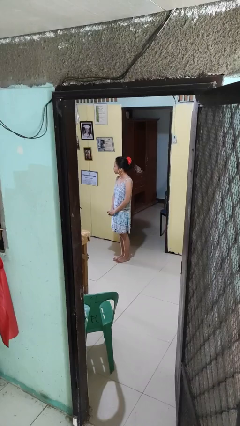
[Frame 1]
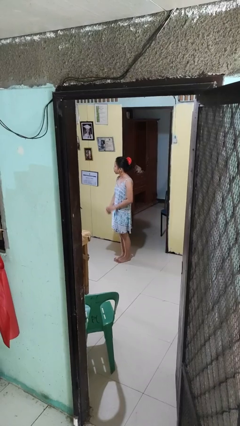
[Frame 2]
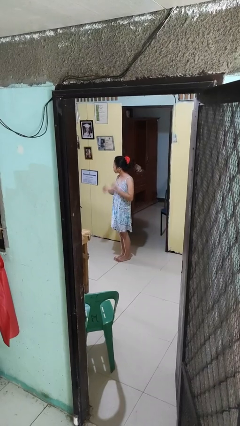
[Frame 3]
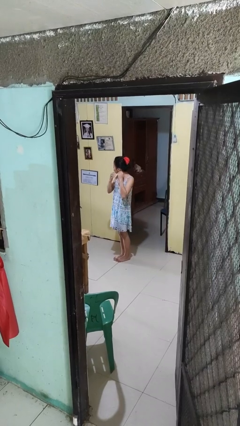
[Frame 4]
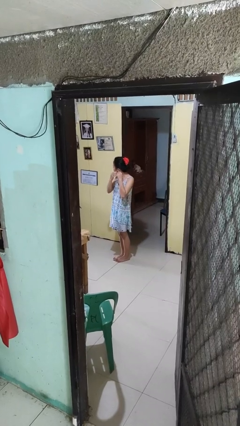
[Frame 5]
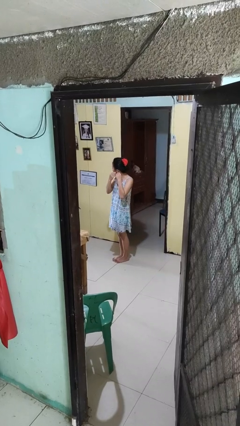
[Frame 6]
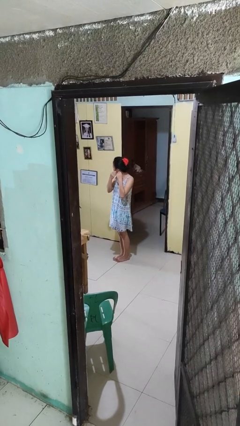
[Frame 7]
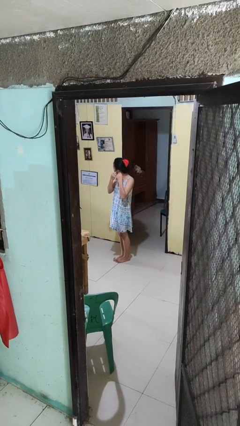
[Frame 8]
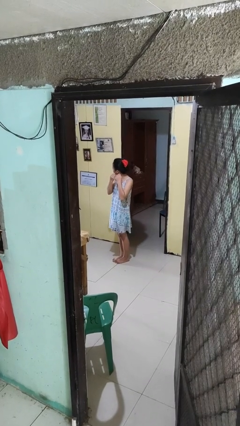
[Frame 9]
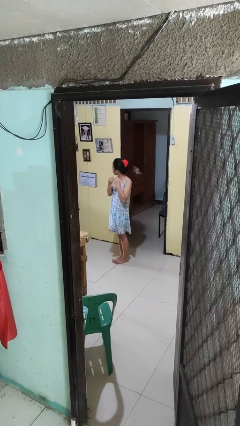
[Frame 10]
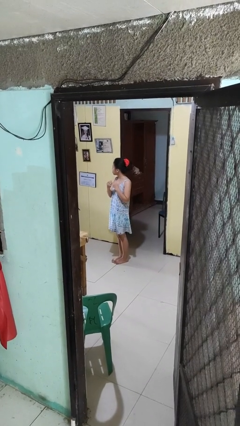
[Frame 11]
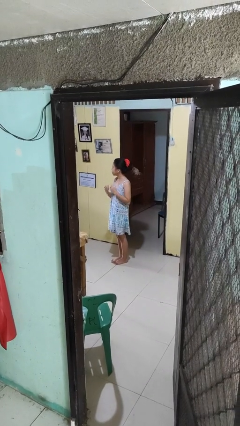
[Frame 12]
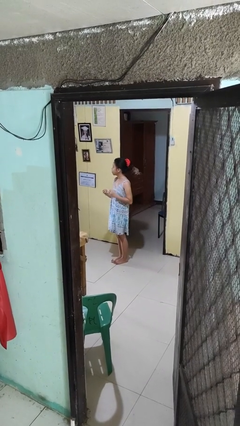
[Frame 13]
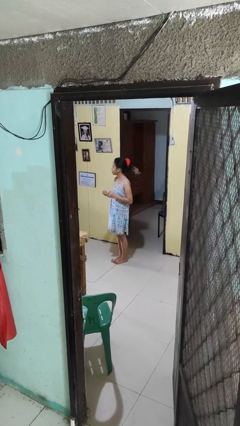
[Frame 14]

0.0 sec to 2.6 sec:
person takes off earrings

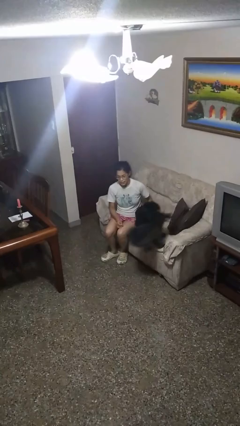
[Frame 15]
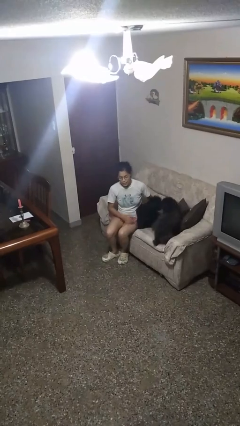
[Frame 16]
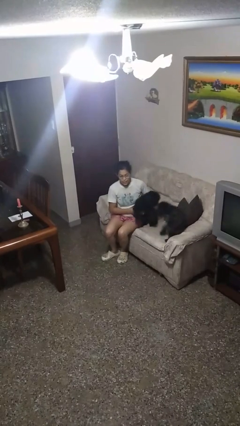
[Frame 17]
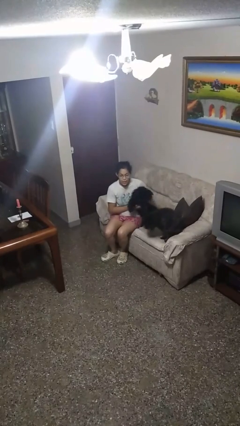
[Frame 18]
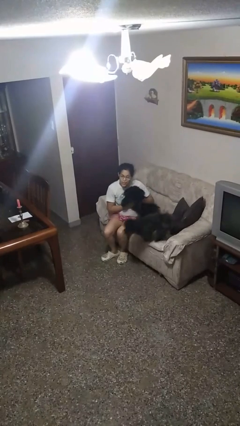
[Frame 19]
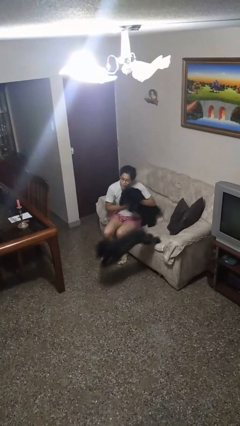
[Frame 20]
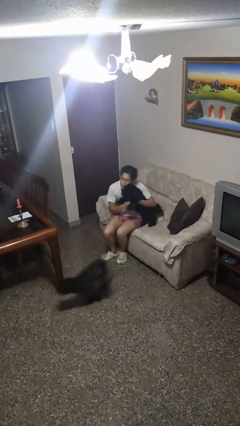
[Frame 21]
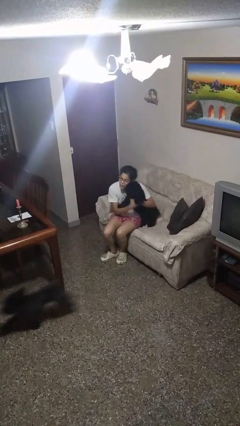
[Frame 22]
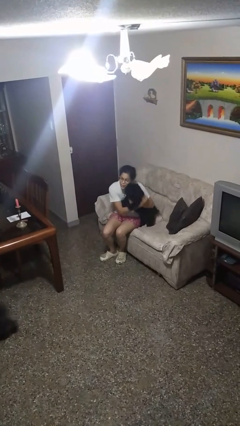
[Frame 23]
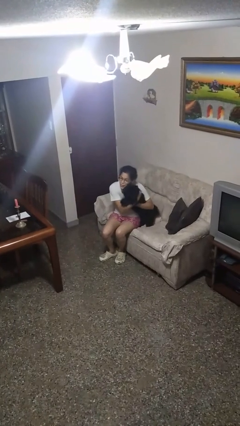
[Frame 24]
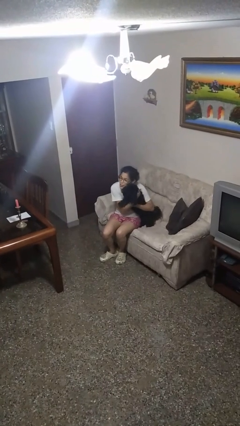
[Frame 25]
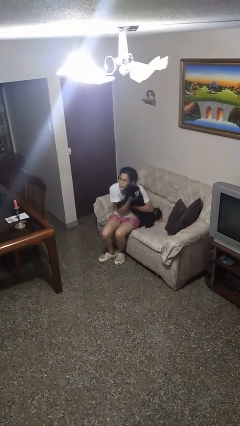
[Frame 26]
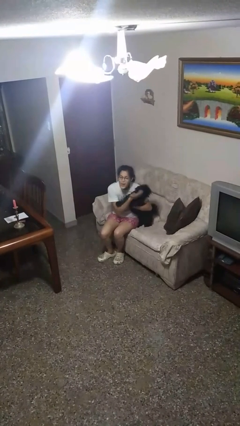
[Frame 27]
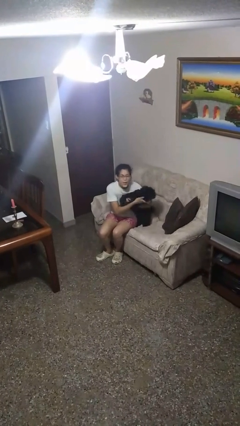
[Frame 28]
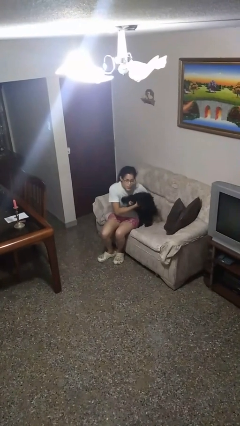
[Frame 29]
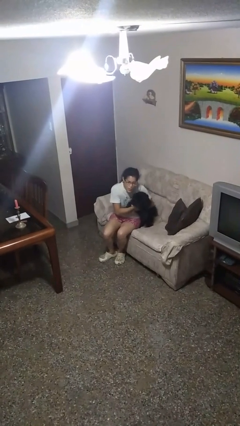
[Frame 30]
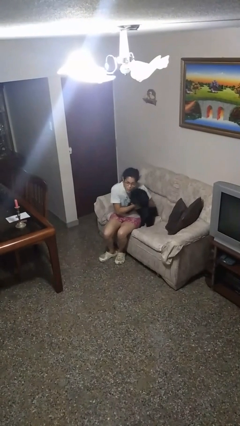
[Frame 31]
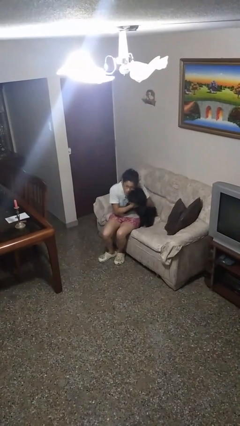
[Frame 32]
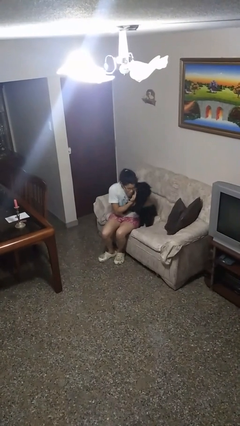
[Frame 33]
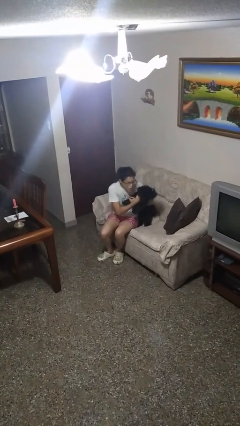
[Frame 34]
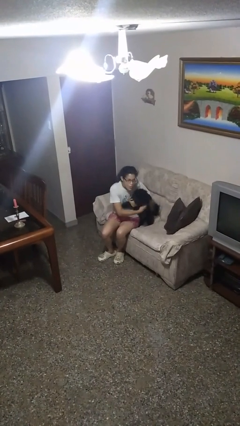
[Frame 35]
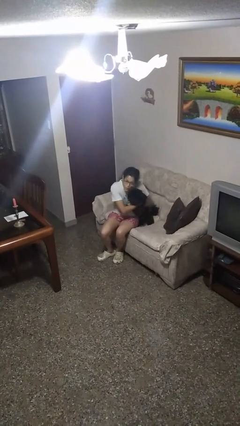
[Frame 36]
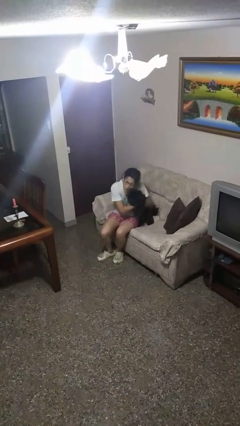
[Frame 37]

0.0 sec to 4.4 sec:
person hugs dog

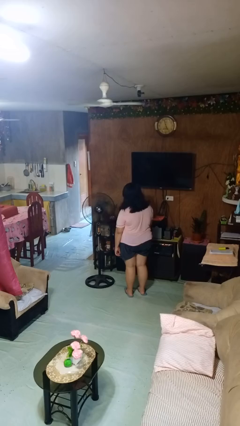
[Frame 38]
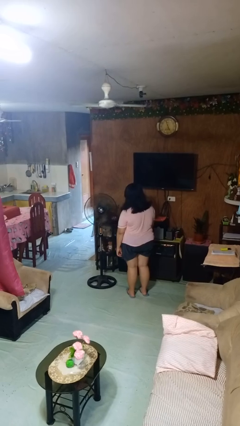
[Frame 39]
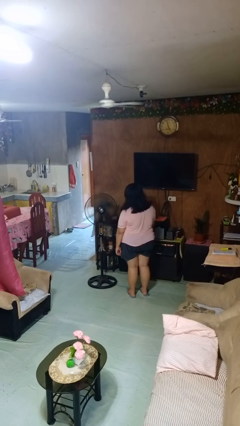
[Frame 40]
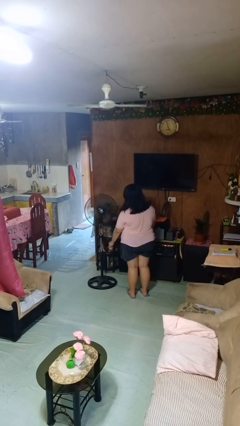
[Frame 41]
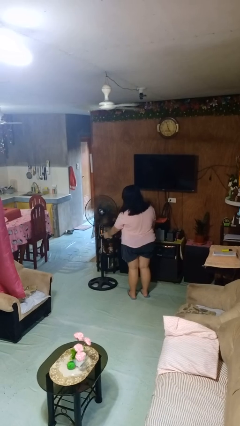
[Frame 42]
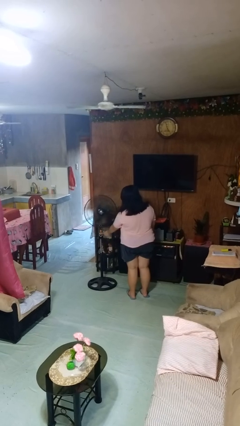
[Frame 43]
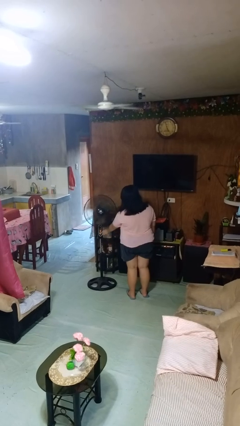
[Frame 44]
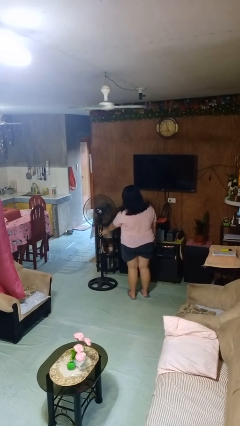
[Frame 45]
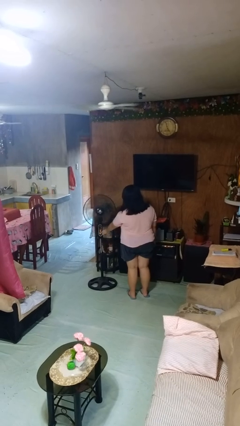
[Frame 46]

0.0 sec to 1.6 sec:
person turns on fan

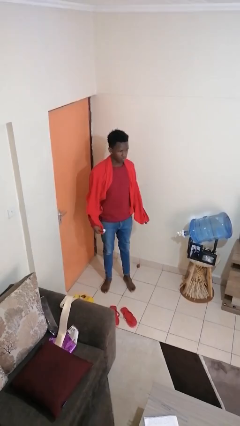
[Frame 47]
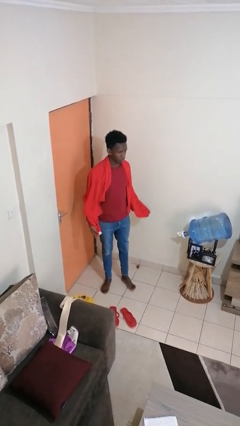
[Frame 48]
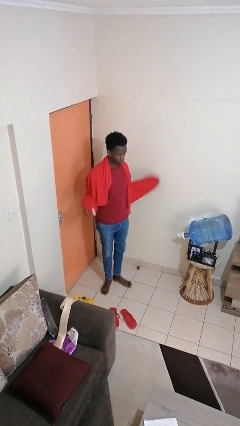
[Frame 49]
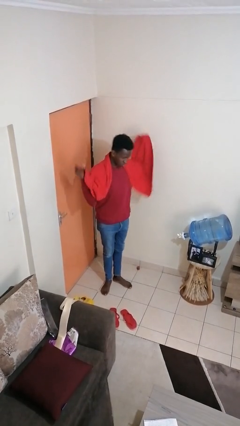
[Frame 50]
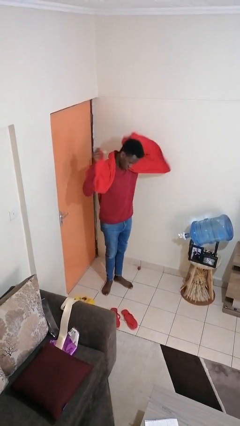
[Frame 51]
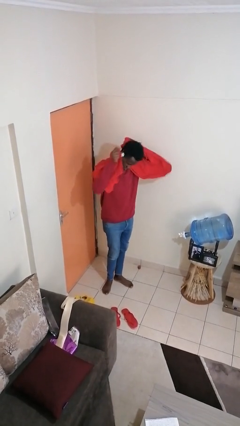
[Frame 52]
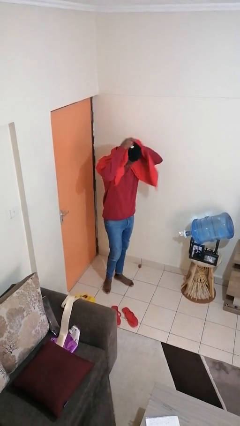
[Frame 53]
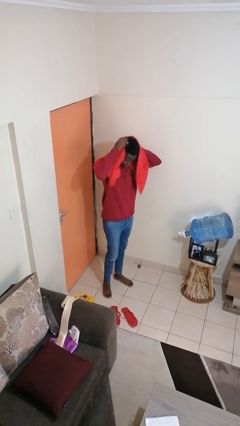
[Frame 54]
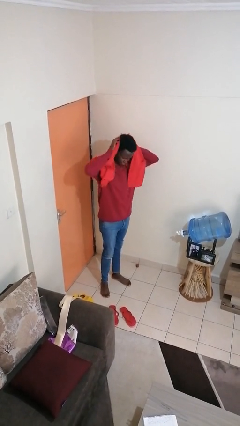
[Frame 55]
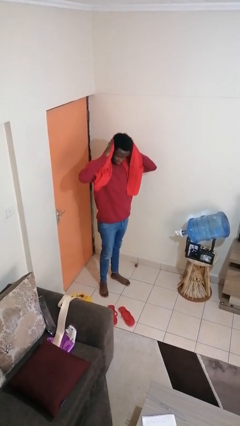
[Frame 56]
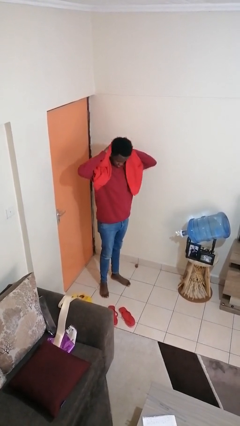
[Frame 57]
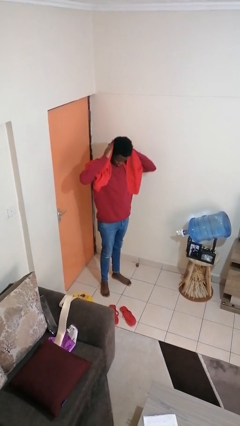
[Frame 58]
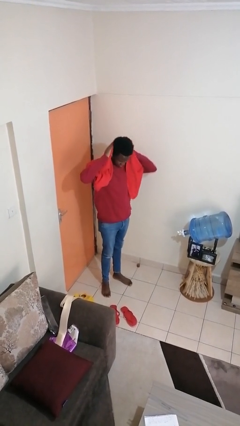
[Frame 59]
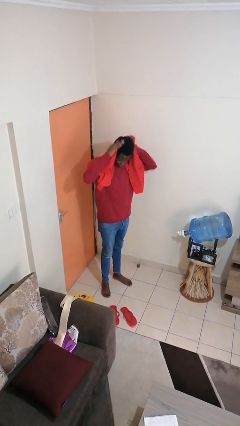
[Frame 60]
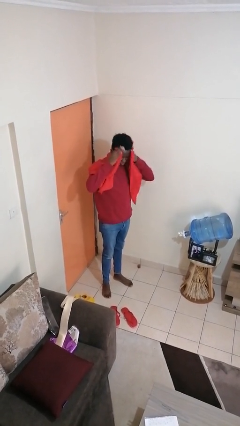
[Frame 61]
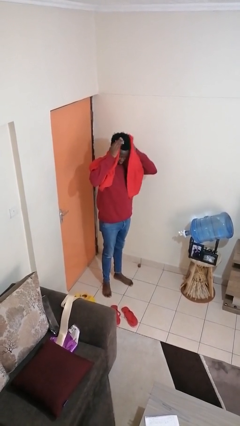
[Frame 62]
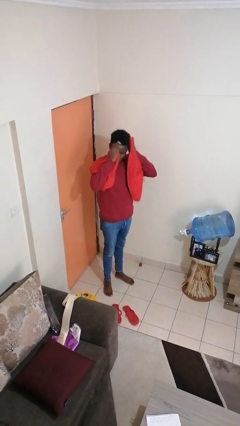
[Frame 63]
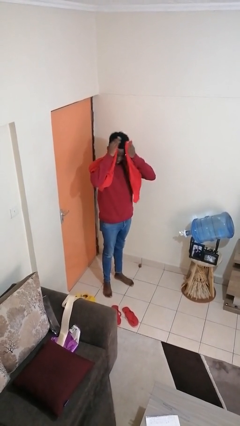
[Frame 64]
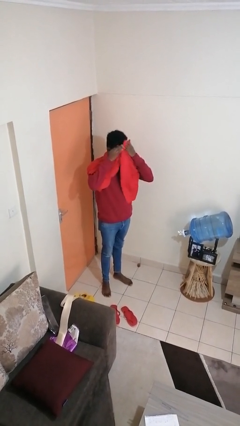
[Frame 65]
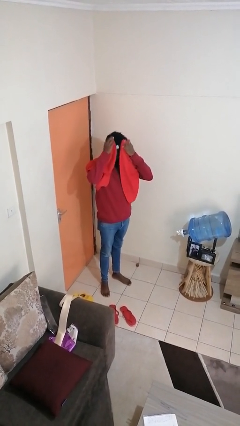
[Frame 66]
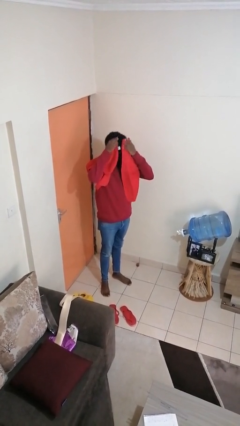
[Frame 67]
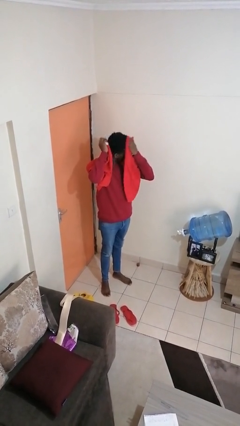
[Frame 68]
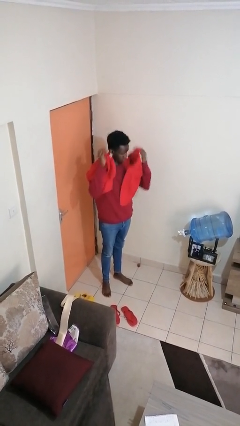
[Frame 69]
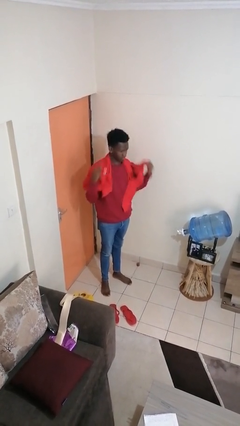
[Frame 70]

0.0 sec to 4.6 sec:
person dries hair with towel

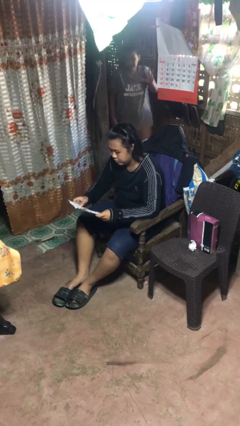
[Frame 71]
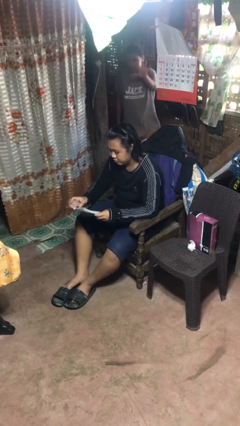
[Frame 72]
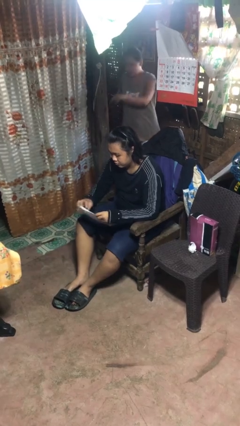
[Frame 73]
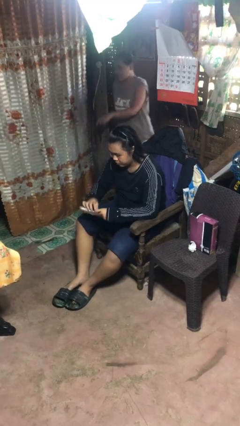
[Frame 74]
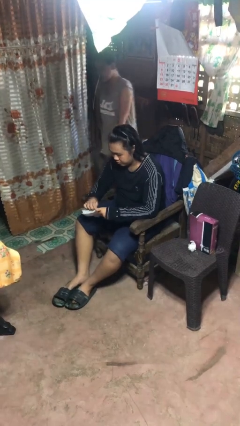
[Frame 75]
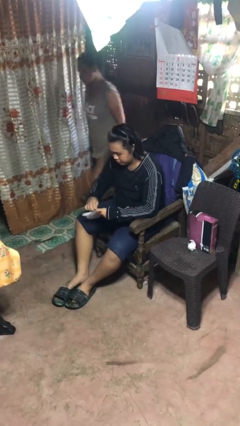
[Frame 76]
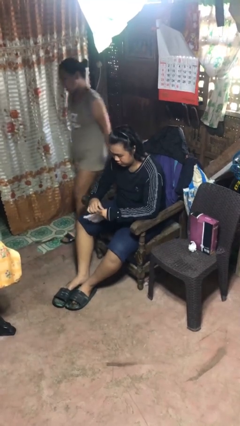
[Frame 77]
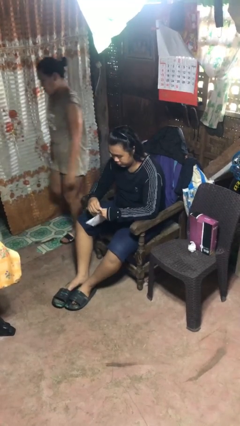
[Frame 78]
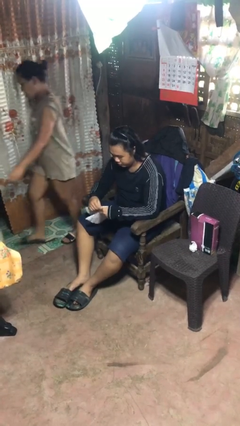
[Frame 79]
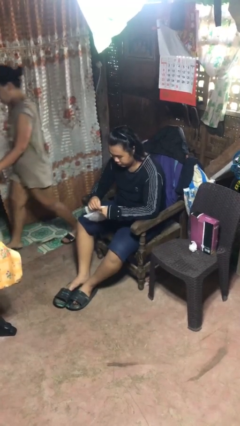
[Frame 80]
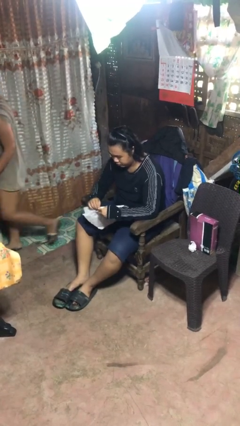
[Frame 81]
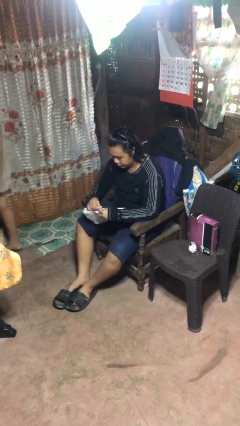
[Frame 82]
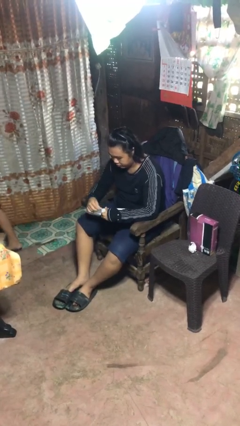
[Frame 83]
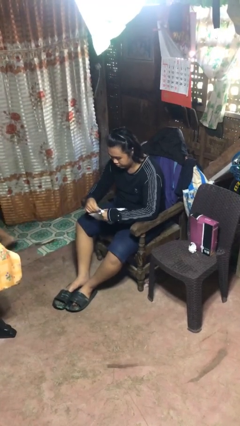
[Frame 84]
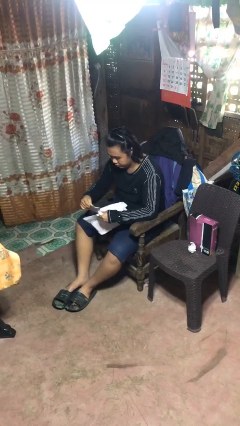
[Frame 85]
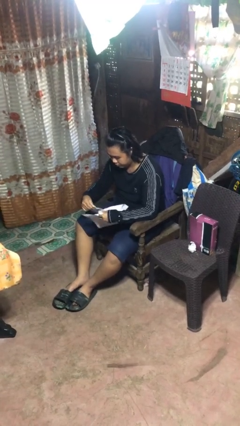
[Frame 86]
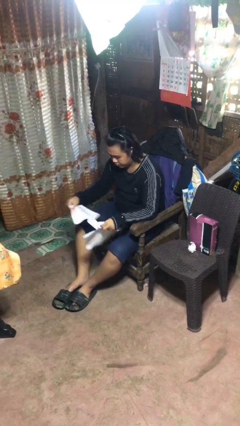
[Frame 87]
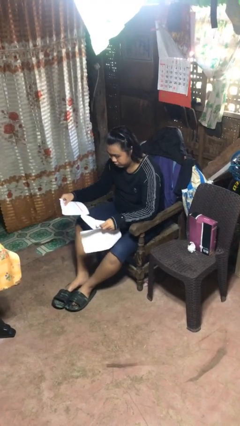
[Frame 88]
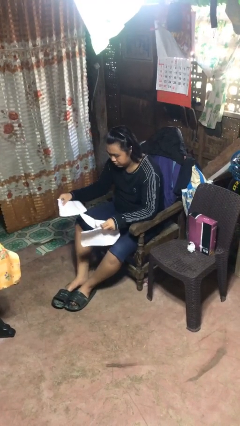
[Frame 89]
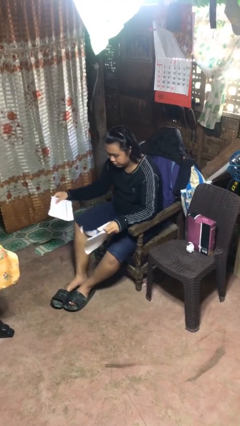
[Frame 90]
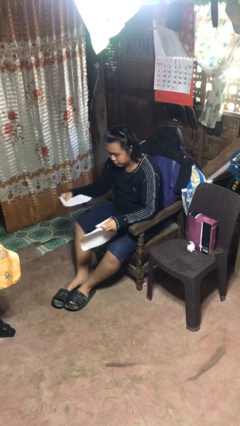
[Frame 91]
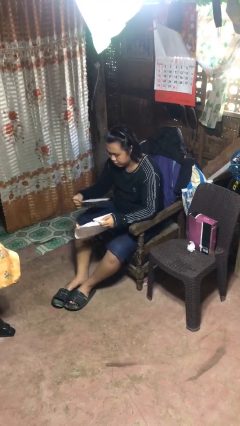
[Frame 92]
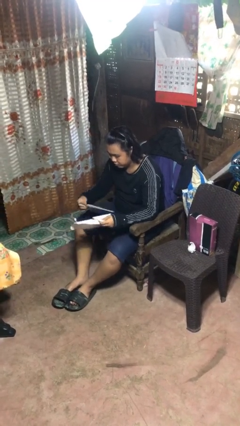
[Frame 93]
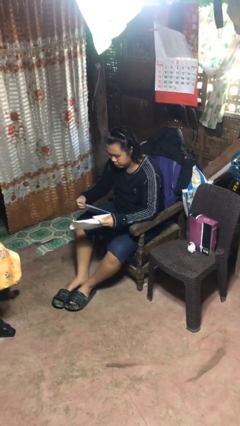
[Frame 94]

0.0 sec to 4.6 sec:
person tears paper
